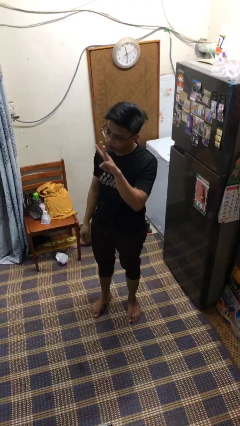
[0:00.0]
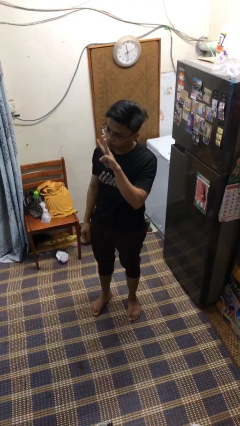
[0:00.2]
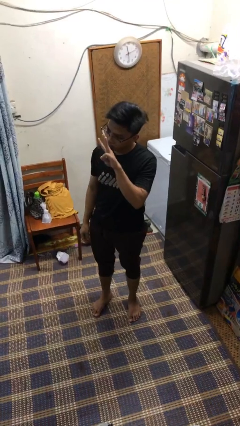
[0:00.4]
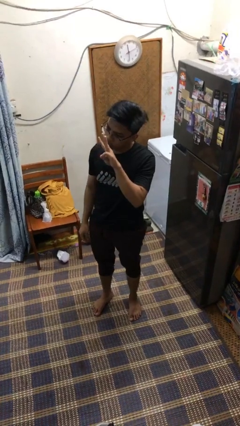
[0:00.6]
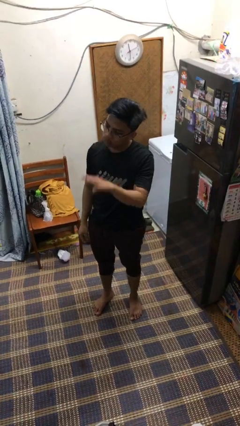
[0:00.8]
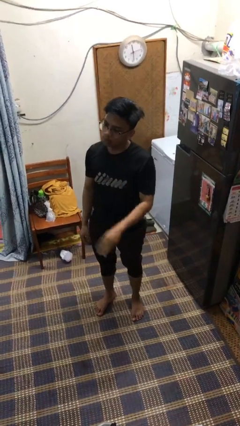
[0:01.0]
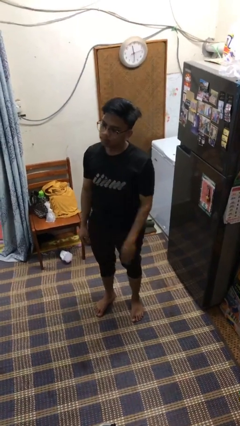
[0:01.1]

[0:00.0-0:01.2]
person gestures number three

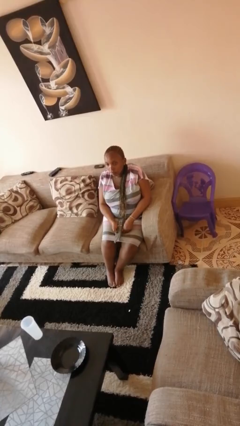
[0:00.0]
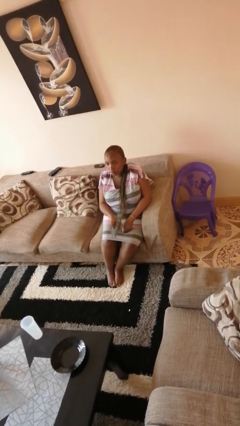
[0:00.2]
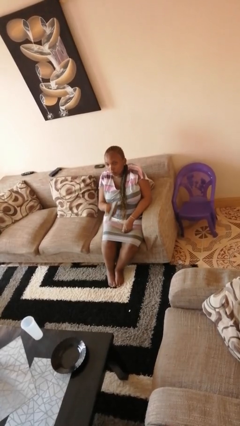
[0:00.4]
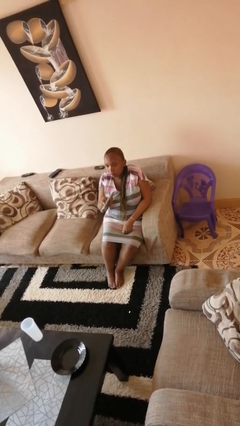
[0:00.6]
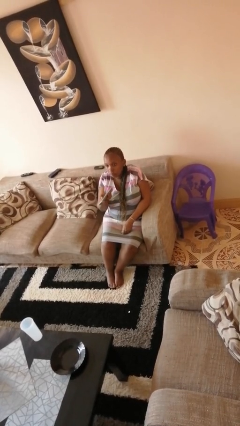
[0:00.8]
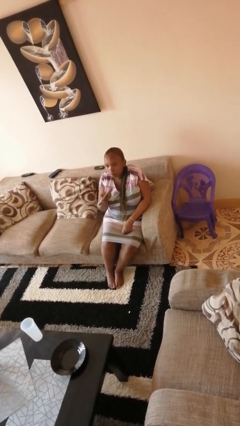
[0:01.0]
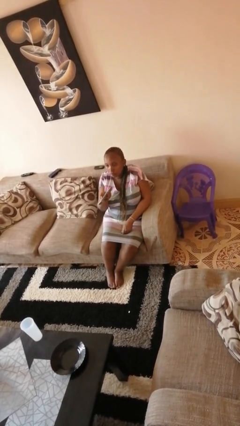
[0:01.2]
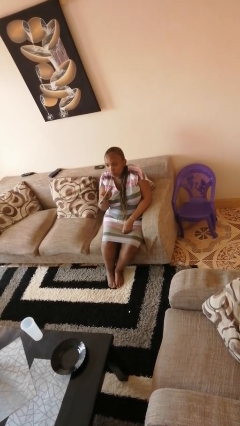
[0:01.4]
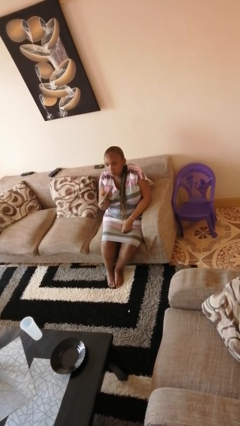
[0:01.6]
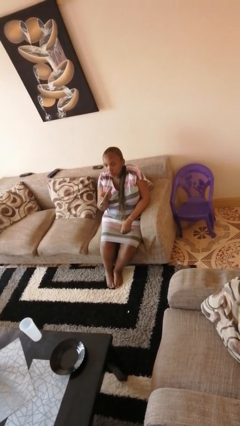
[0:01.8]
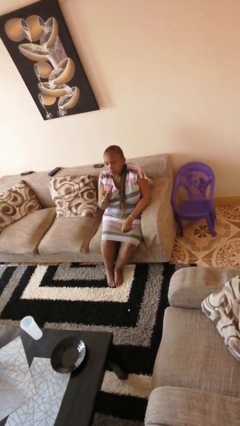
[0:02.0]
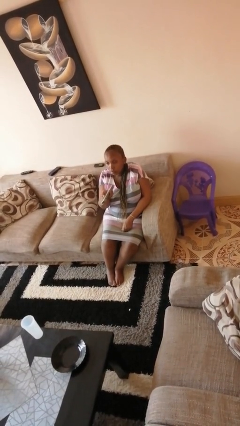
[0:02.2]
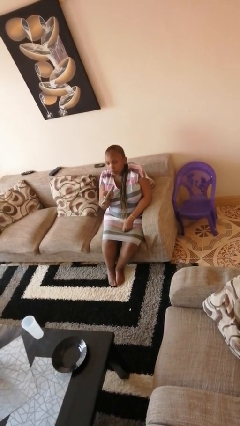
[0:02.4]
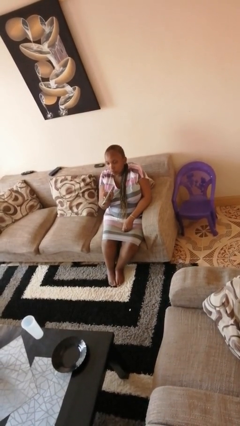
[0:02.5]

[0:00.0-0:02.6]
person uses television remote

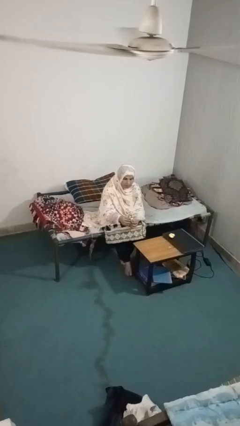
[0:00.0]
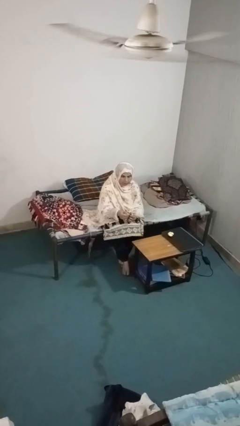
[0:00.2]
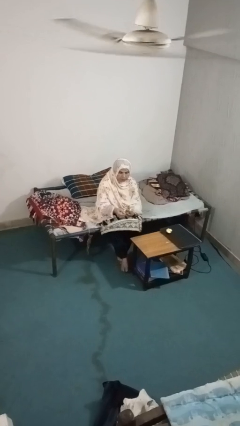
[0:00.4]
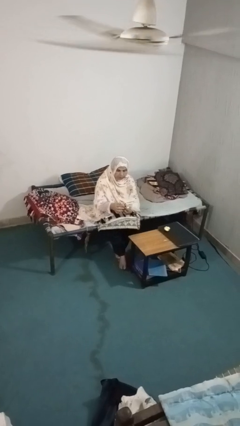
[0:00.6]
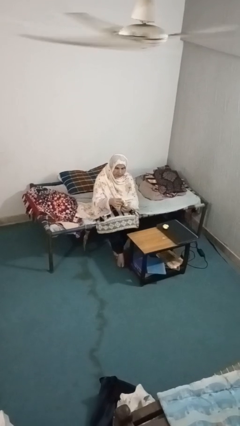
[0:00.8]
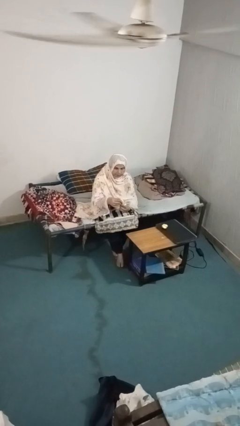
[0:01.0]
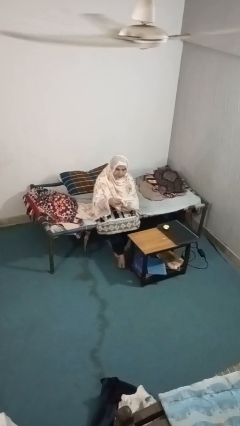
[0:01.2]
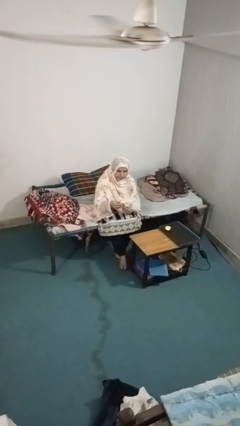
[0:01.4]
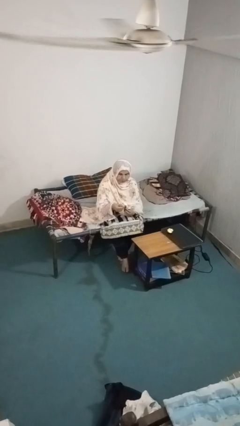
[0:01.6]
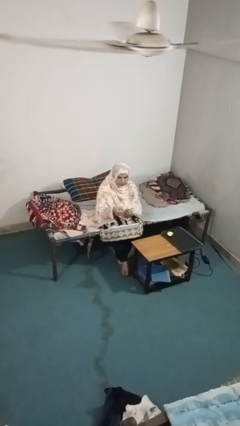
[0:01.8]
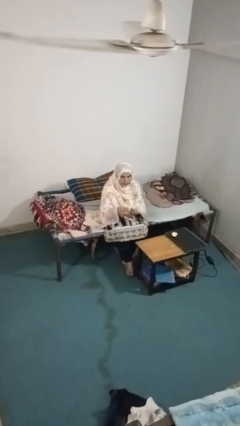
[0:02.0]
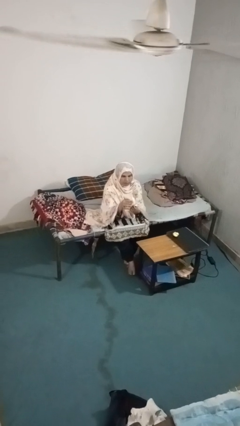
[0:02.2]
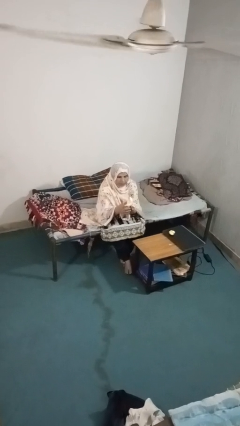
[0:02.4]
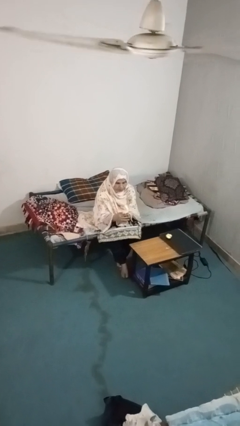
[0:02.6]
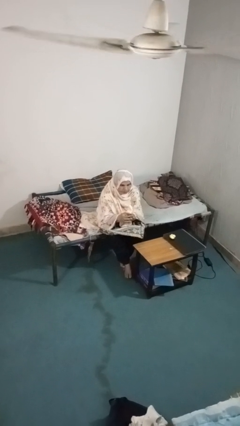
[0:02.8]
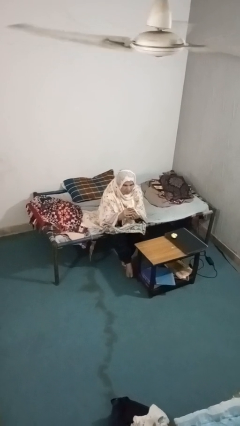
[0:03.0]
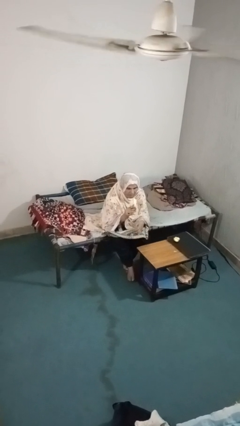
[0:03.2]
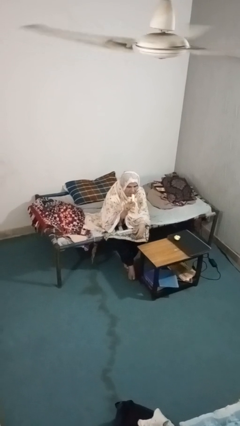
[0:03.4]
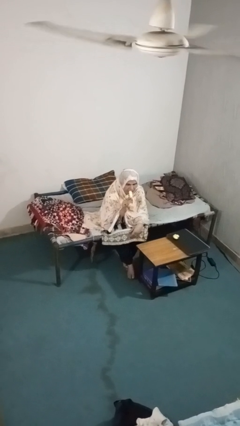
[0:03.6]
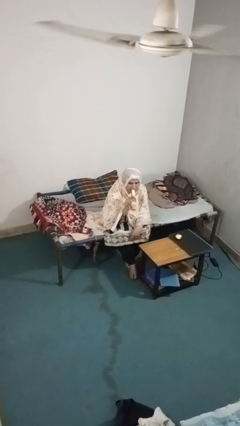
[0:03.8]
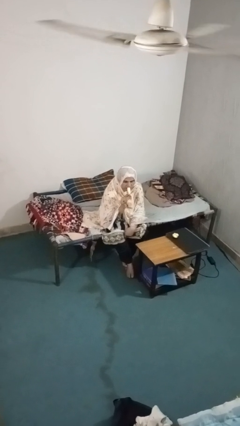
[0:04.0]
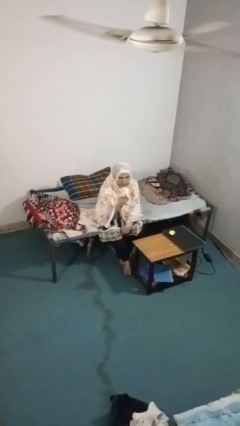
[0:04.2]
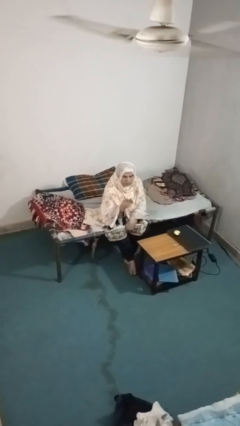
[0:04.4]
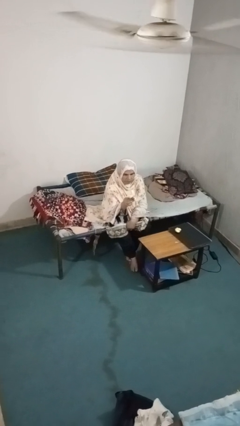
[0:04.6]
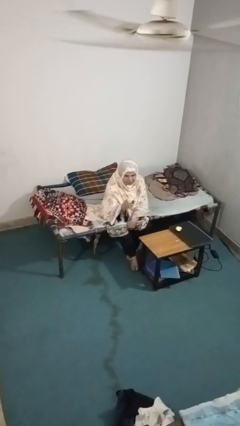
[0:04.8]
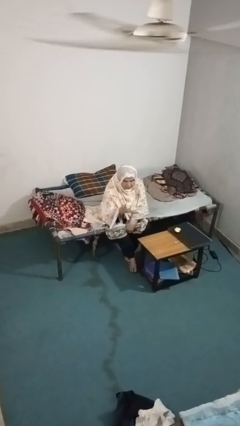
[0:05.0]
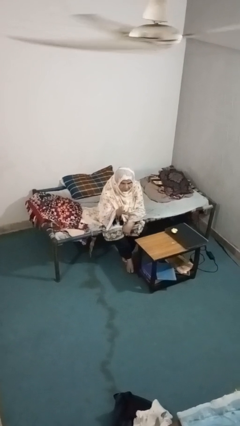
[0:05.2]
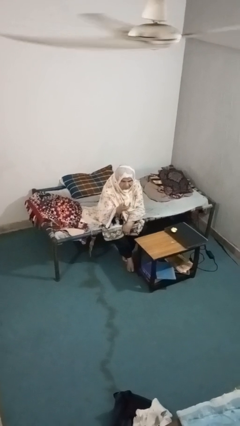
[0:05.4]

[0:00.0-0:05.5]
person eats banana

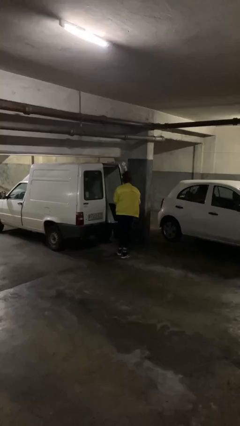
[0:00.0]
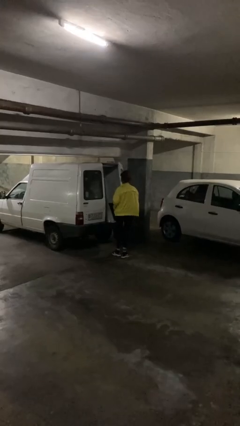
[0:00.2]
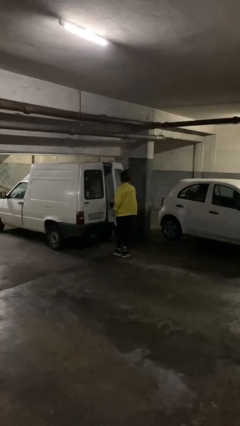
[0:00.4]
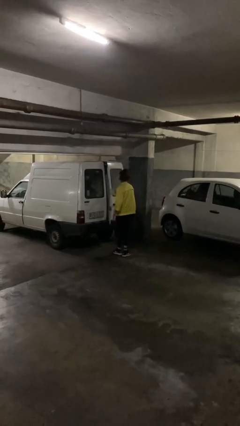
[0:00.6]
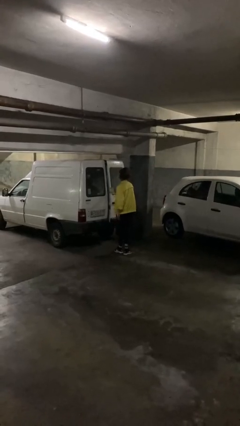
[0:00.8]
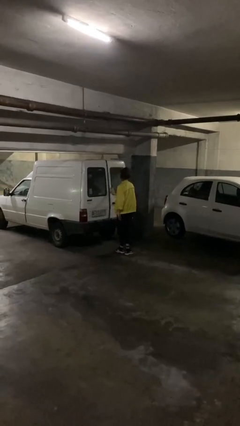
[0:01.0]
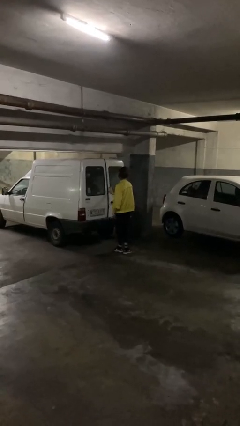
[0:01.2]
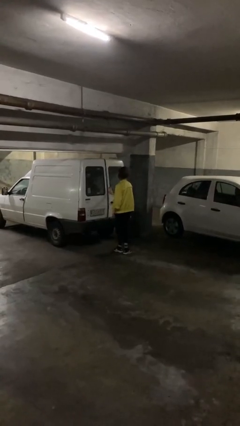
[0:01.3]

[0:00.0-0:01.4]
person closes car door

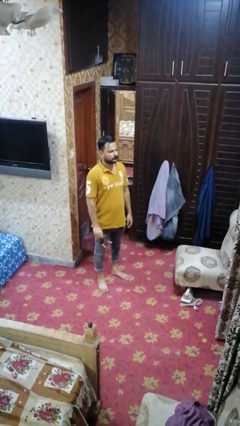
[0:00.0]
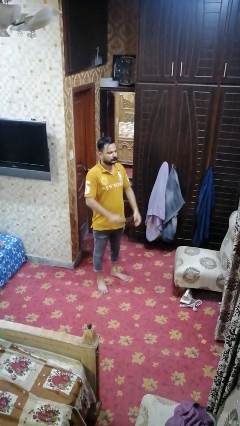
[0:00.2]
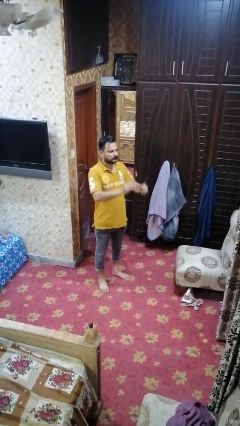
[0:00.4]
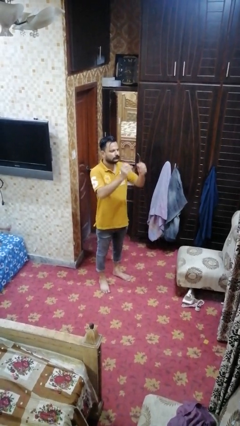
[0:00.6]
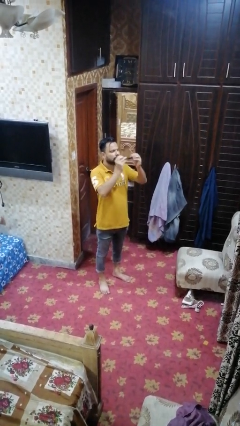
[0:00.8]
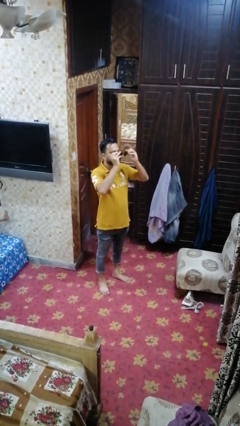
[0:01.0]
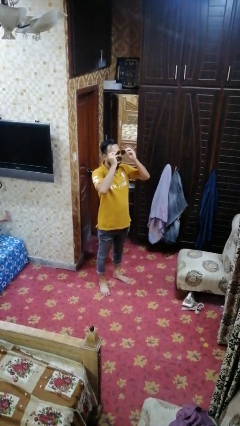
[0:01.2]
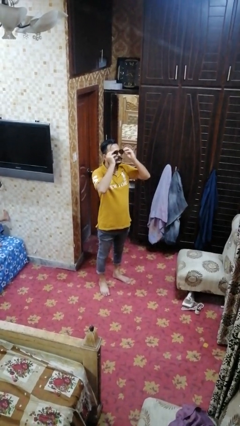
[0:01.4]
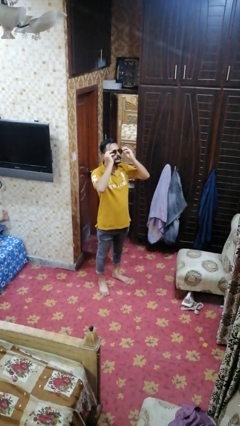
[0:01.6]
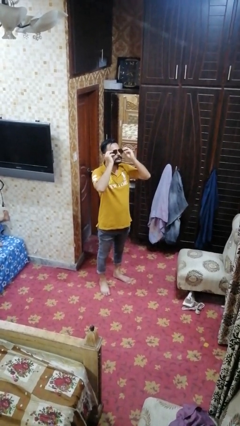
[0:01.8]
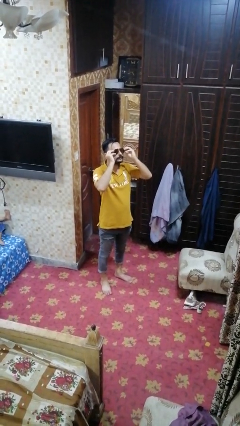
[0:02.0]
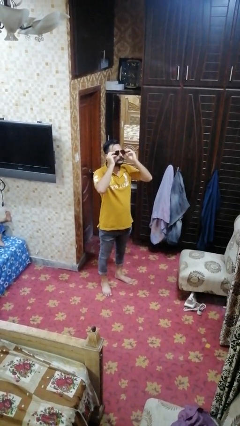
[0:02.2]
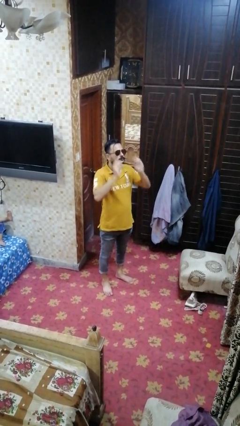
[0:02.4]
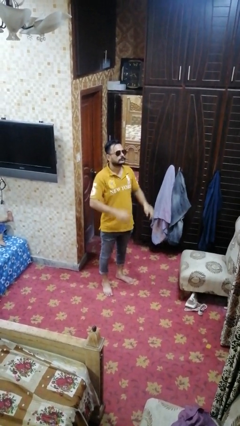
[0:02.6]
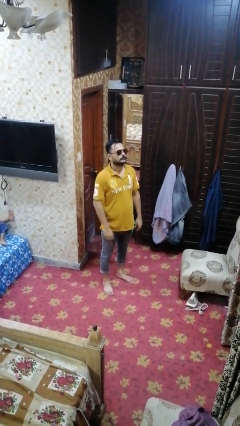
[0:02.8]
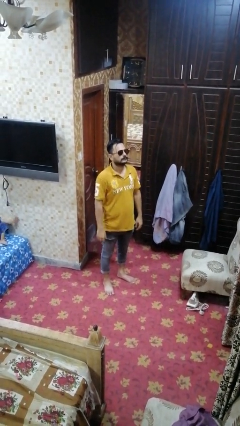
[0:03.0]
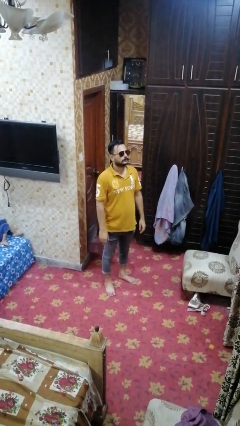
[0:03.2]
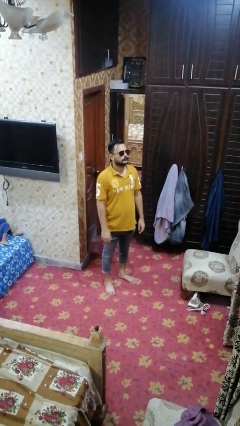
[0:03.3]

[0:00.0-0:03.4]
person puts on sunglasses

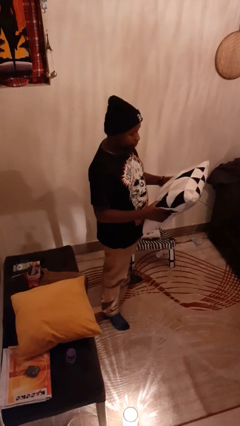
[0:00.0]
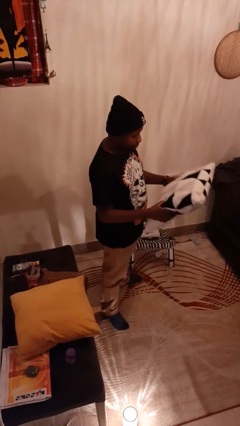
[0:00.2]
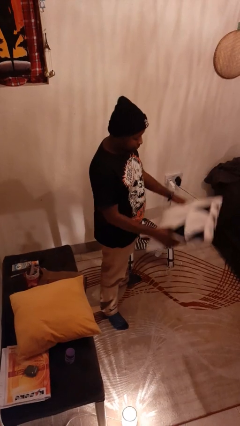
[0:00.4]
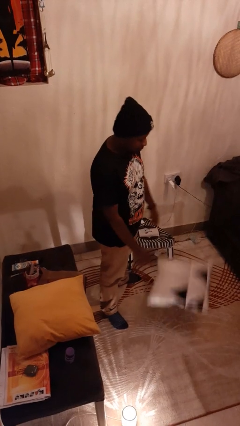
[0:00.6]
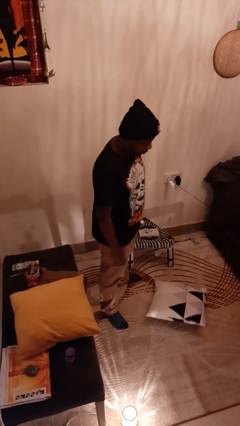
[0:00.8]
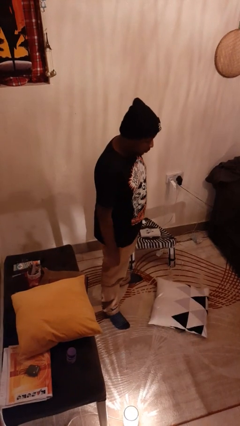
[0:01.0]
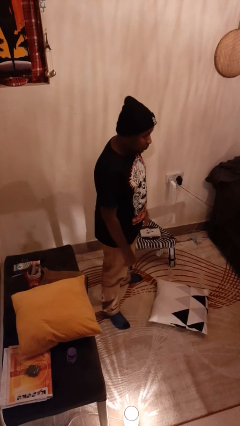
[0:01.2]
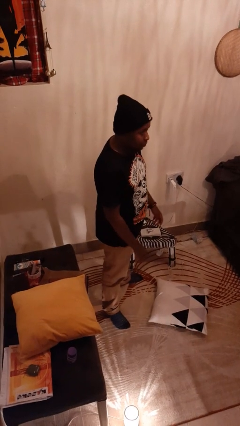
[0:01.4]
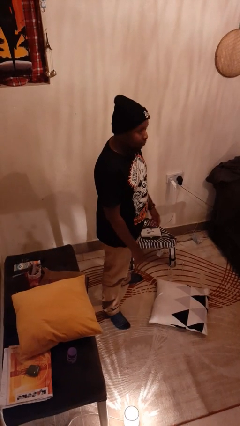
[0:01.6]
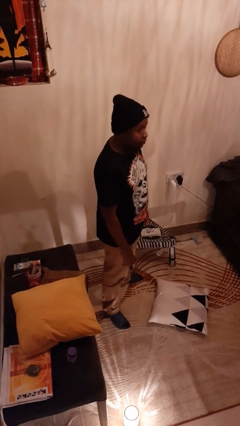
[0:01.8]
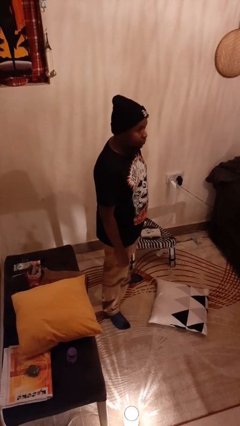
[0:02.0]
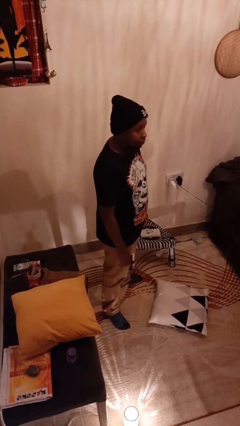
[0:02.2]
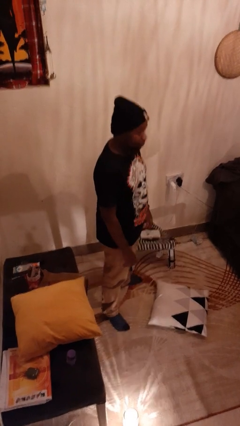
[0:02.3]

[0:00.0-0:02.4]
person drops object

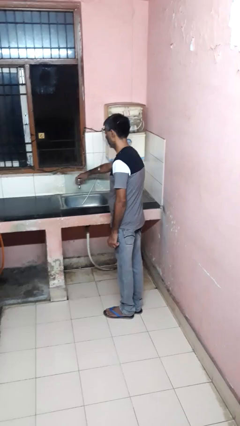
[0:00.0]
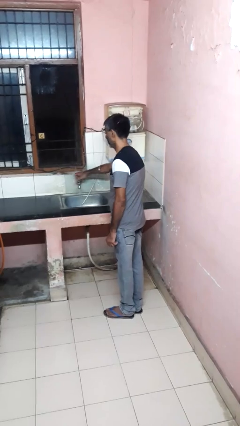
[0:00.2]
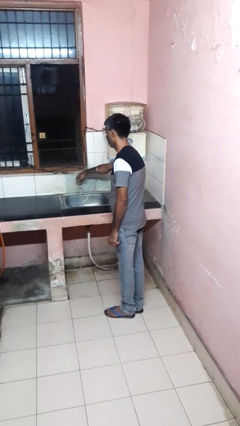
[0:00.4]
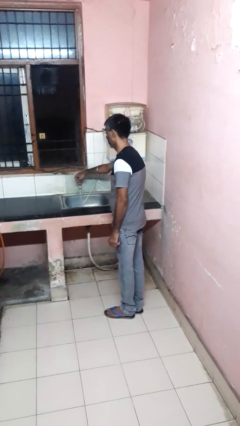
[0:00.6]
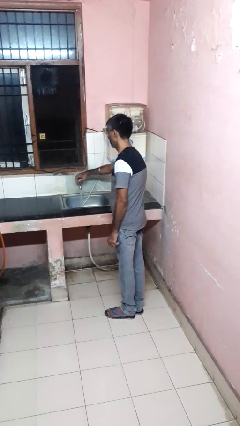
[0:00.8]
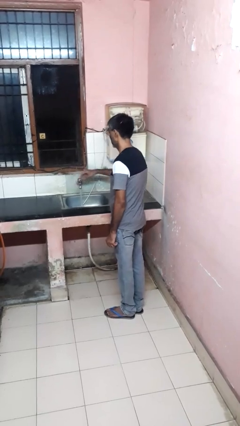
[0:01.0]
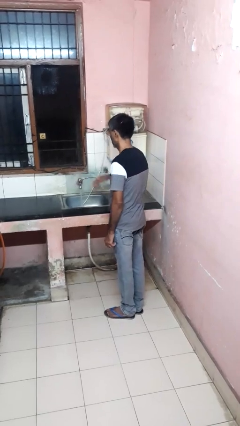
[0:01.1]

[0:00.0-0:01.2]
person turns on faucet
